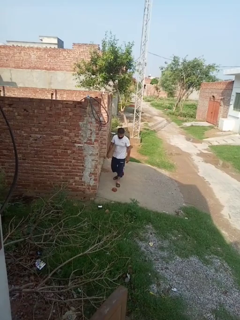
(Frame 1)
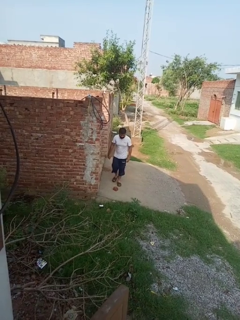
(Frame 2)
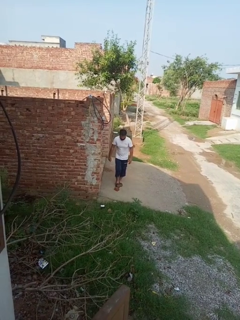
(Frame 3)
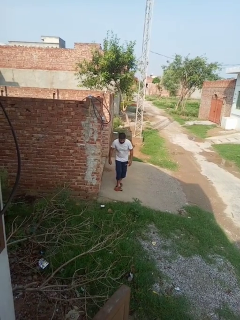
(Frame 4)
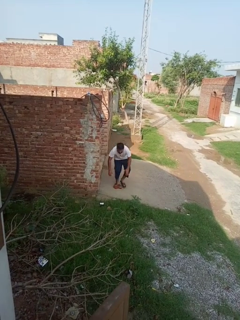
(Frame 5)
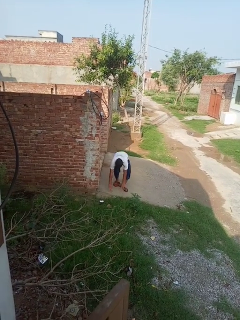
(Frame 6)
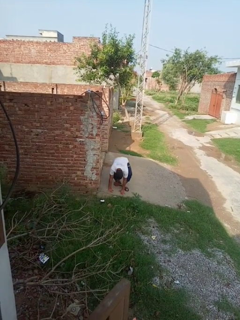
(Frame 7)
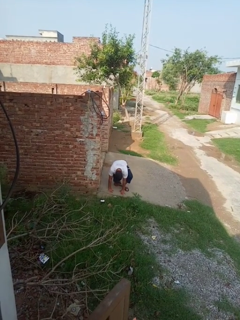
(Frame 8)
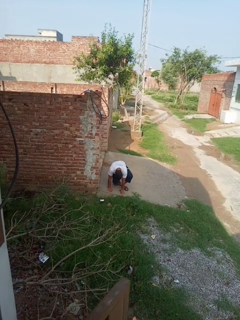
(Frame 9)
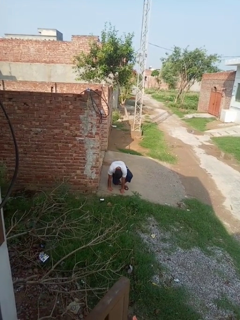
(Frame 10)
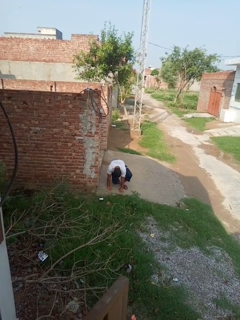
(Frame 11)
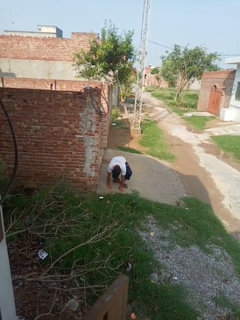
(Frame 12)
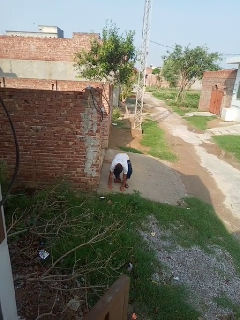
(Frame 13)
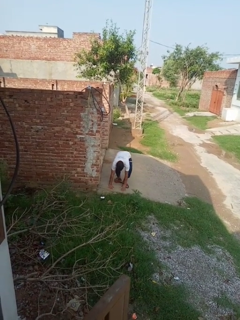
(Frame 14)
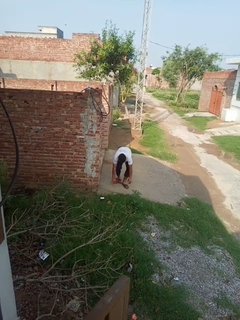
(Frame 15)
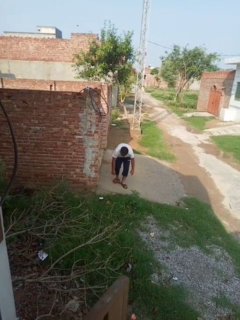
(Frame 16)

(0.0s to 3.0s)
person trips on object on floor

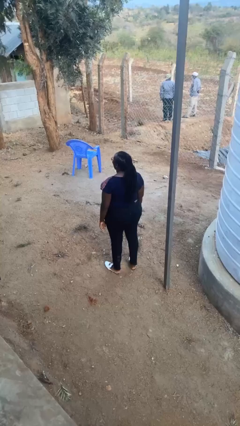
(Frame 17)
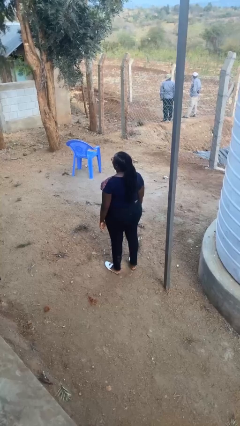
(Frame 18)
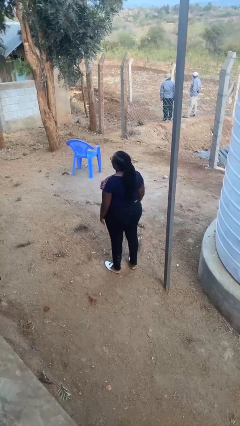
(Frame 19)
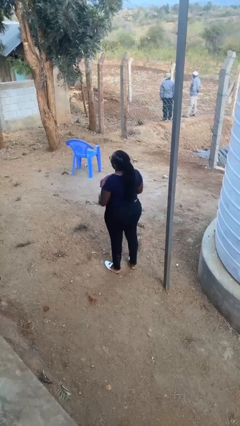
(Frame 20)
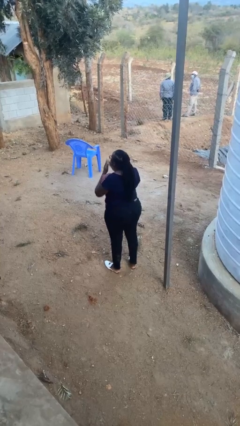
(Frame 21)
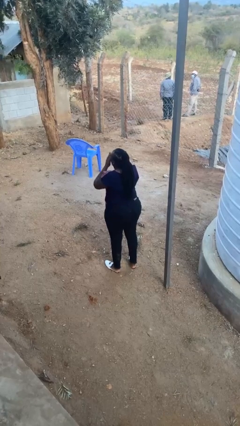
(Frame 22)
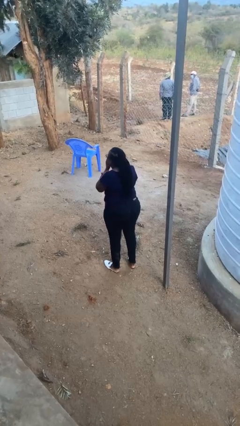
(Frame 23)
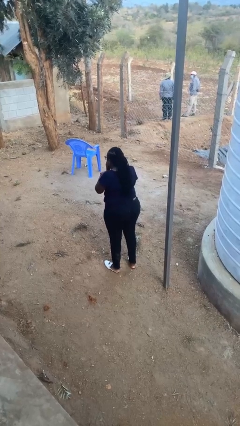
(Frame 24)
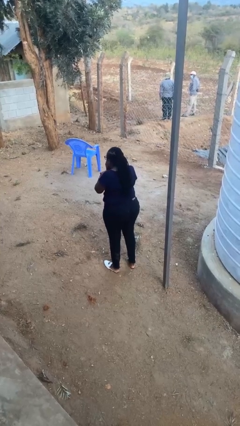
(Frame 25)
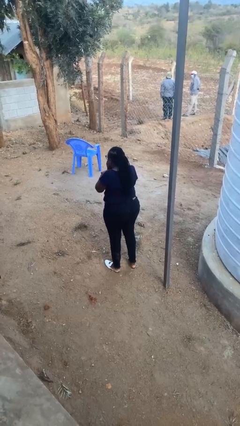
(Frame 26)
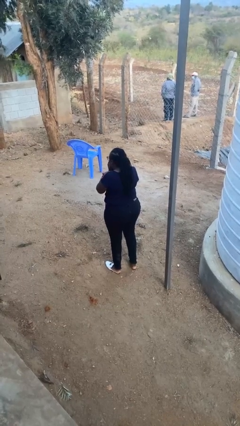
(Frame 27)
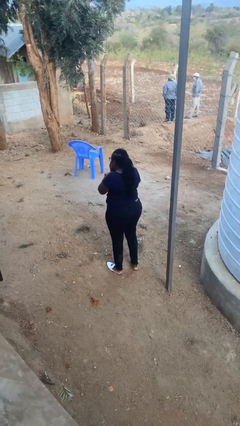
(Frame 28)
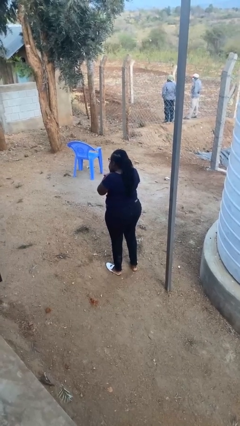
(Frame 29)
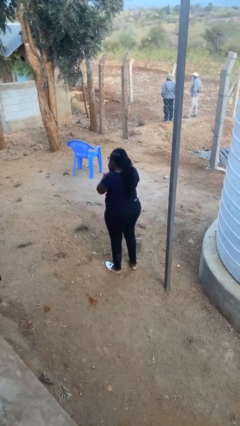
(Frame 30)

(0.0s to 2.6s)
person sneezes into hand

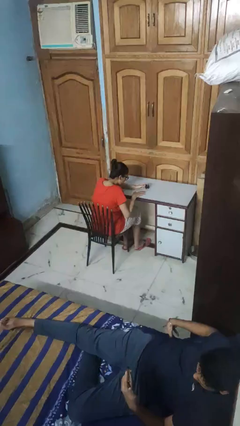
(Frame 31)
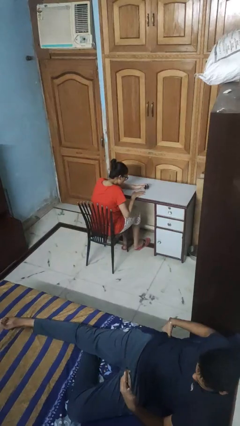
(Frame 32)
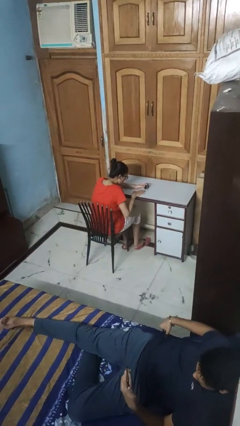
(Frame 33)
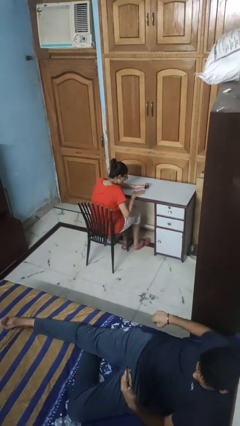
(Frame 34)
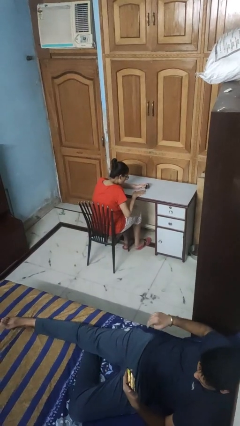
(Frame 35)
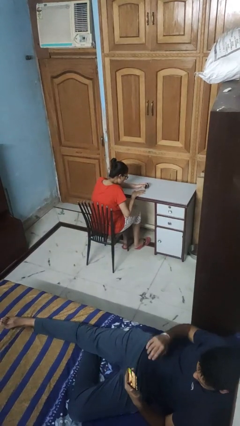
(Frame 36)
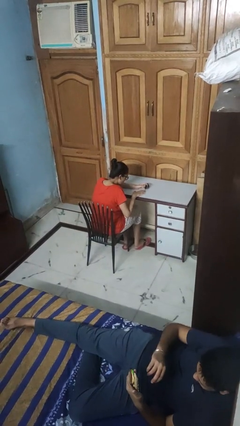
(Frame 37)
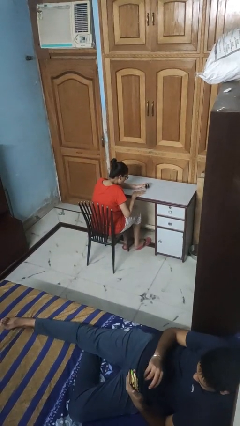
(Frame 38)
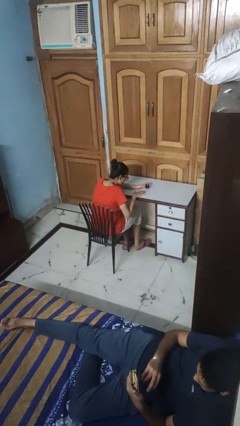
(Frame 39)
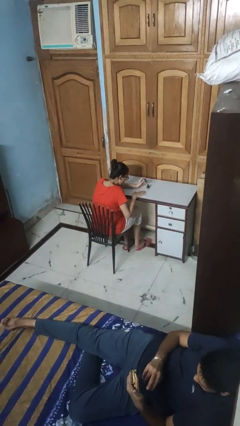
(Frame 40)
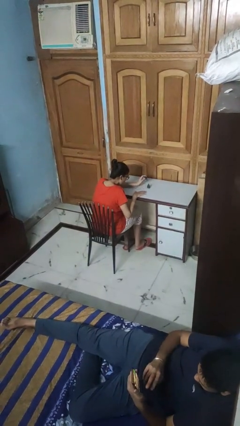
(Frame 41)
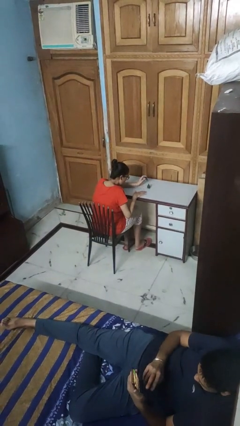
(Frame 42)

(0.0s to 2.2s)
person paints fingernails

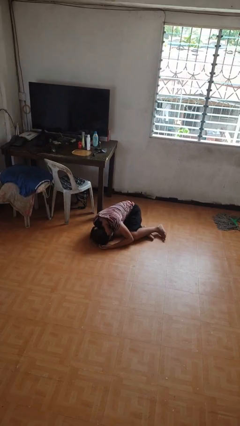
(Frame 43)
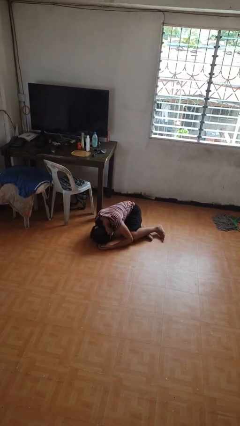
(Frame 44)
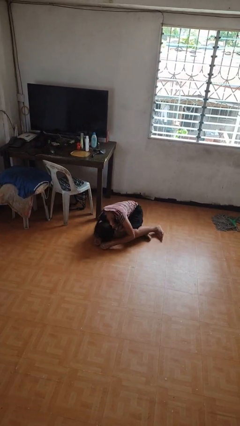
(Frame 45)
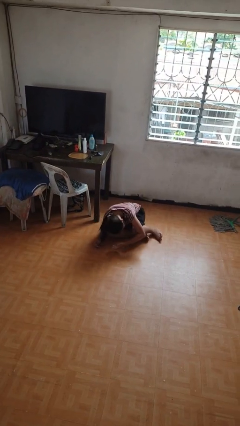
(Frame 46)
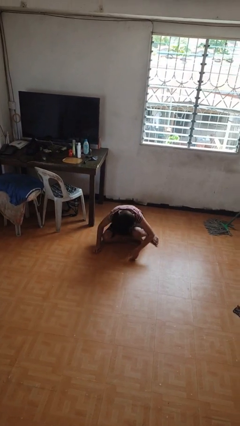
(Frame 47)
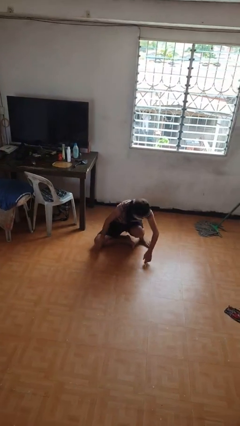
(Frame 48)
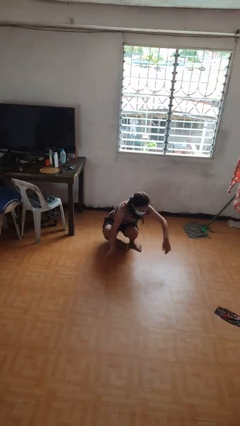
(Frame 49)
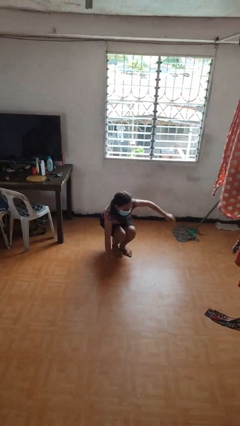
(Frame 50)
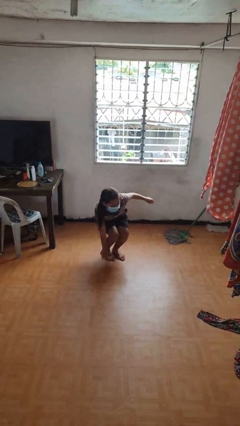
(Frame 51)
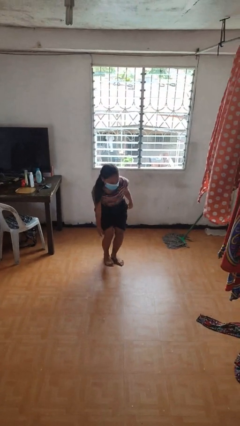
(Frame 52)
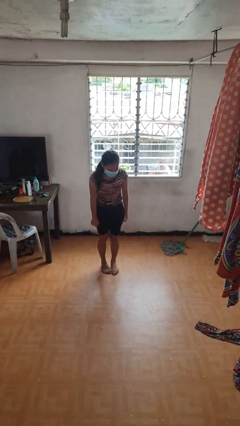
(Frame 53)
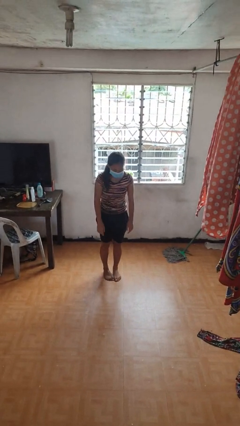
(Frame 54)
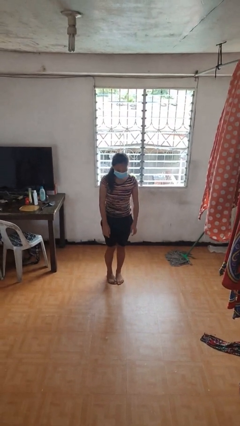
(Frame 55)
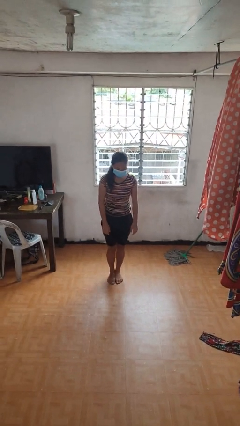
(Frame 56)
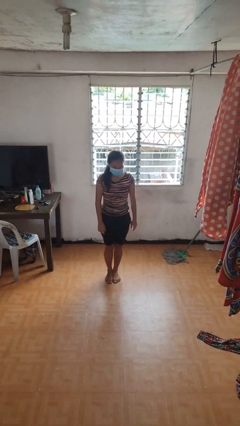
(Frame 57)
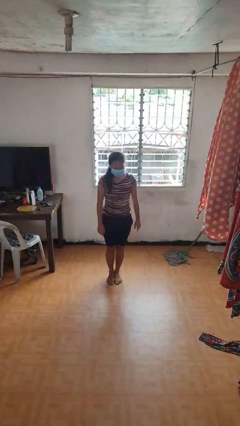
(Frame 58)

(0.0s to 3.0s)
person stands up from floor

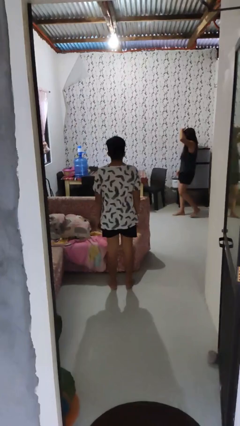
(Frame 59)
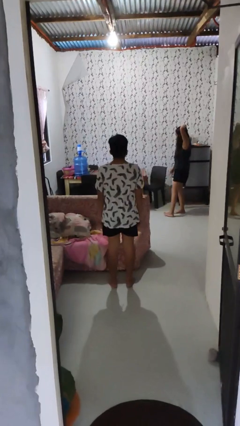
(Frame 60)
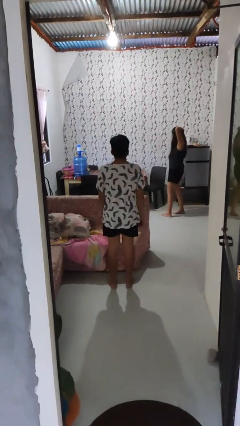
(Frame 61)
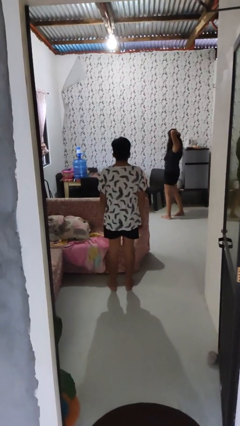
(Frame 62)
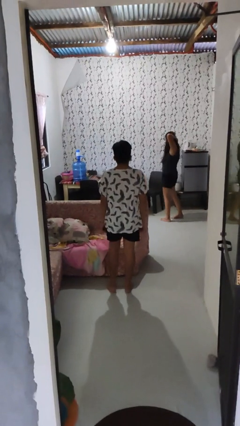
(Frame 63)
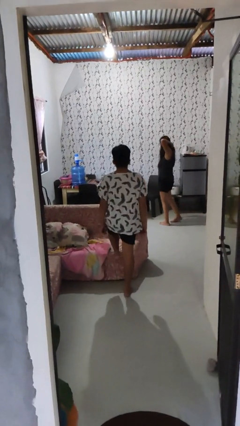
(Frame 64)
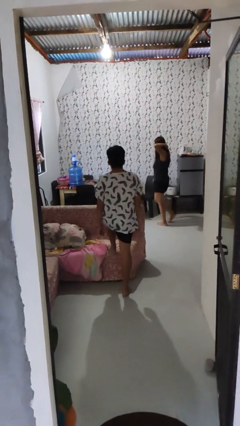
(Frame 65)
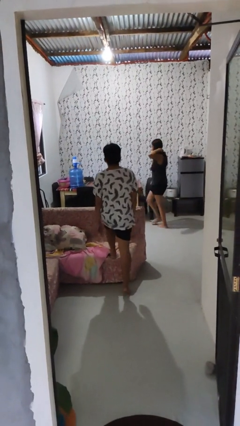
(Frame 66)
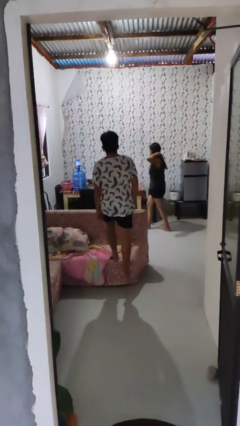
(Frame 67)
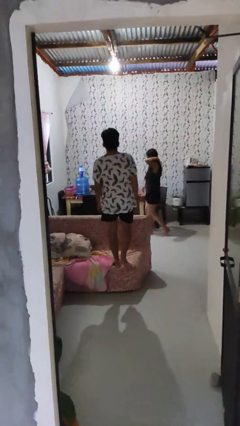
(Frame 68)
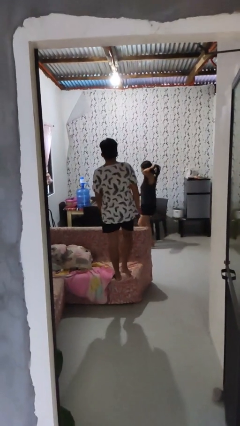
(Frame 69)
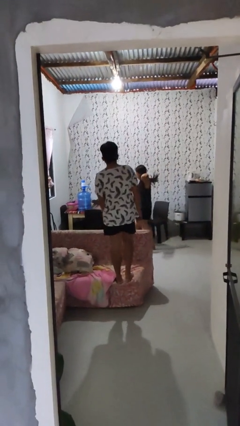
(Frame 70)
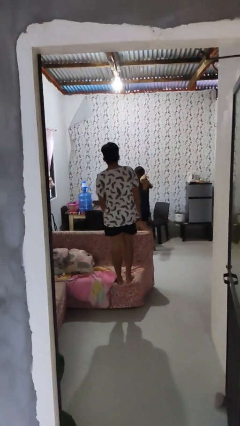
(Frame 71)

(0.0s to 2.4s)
person climbs on couch

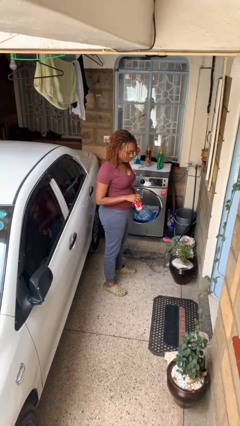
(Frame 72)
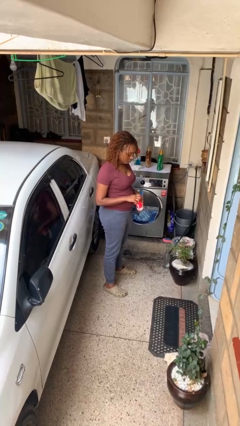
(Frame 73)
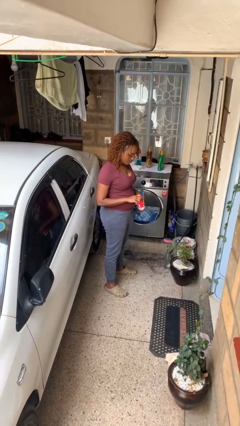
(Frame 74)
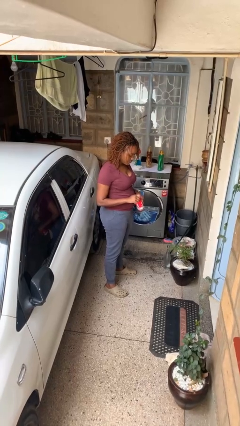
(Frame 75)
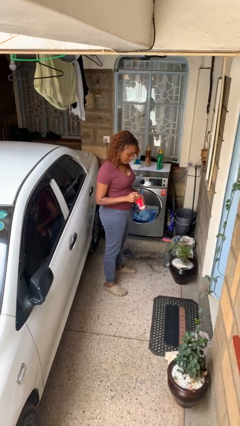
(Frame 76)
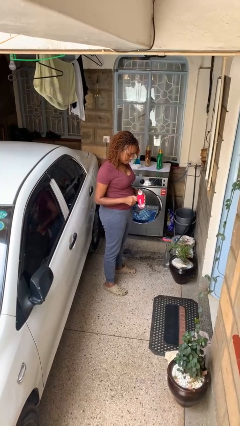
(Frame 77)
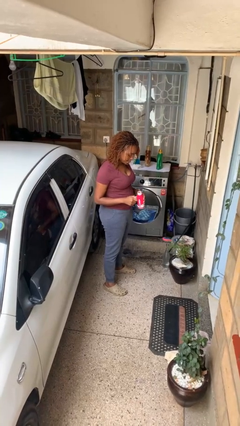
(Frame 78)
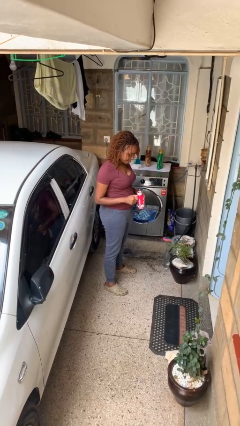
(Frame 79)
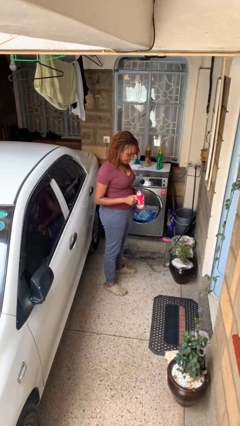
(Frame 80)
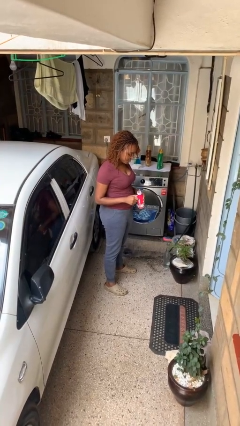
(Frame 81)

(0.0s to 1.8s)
person opens beverage can

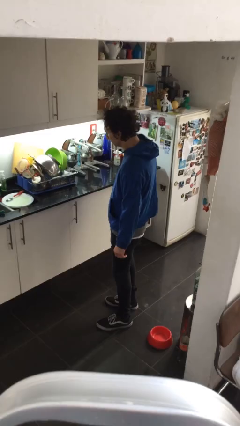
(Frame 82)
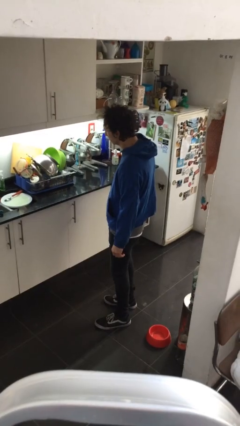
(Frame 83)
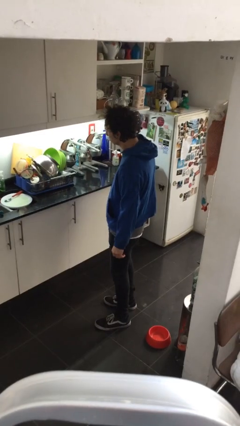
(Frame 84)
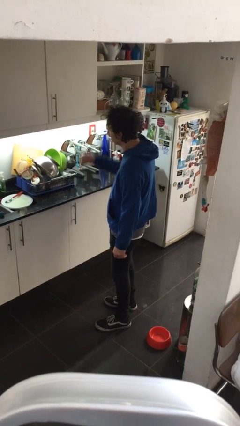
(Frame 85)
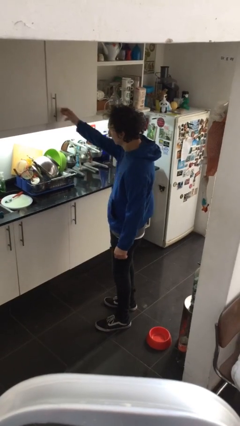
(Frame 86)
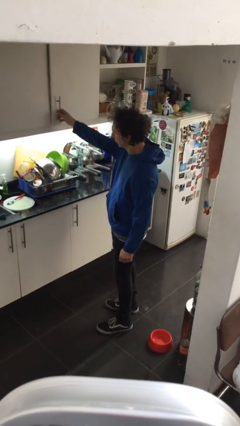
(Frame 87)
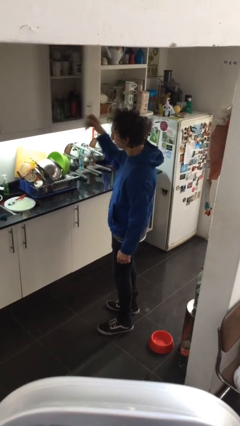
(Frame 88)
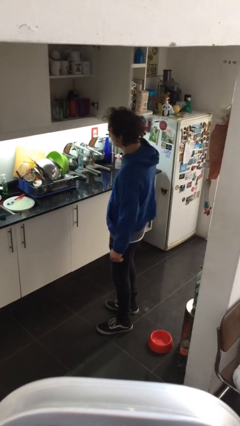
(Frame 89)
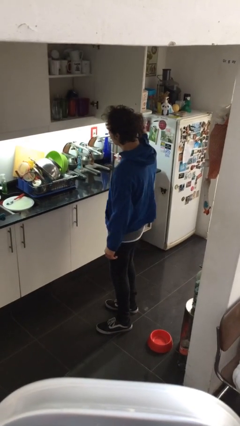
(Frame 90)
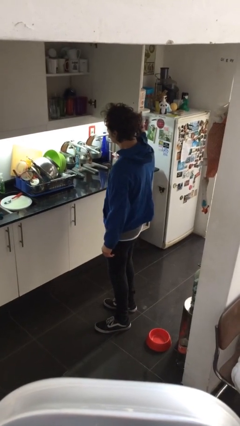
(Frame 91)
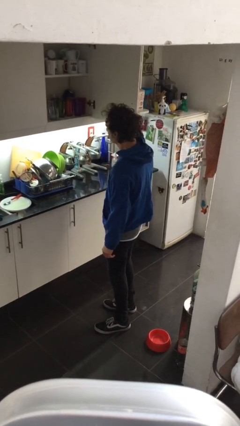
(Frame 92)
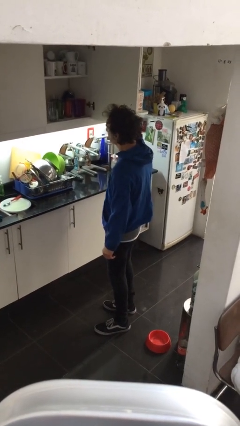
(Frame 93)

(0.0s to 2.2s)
person opens cabinet

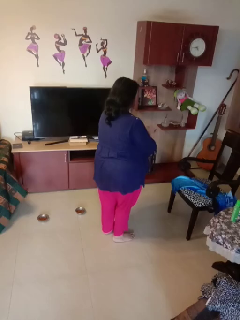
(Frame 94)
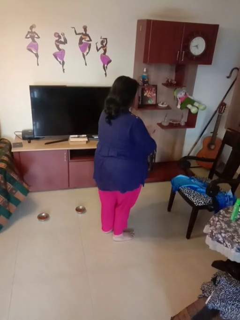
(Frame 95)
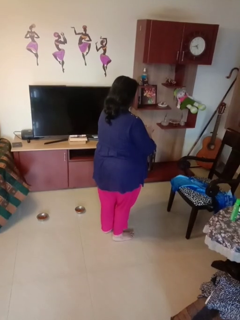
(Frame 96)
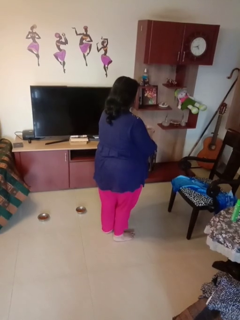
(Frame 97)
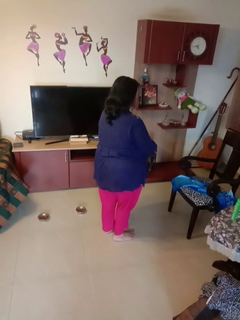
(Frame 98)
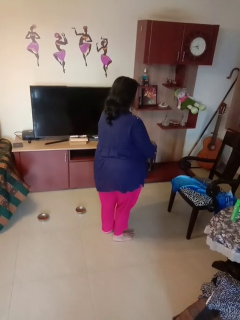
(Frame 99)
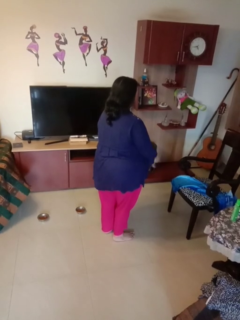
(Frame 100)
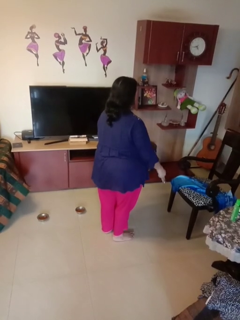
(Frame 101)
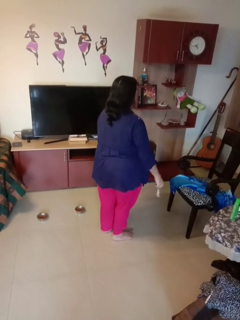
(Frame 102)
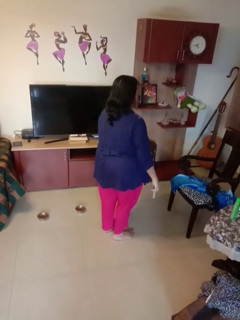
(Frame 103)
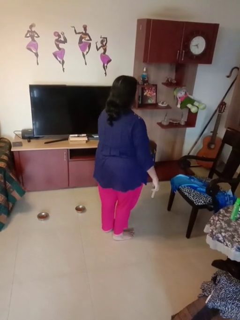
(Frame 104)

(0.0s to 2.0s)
person takes off wristwatch
